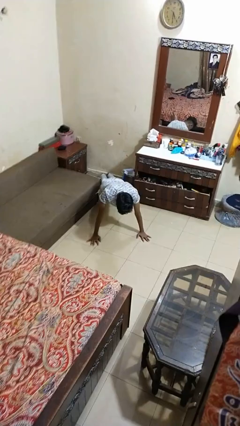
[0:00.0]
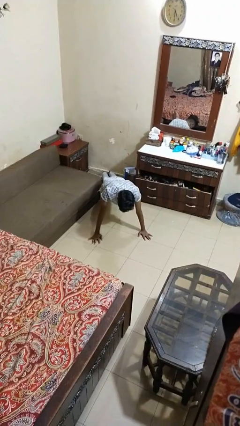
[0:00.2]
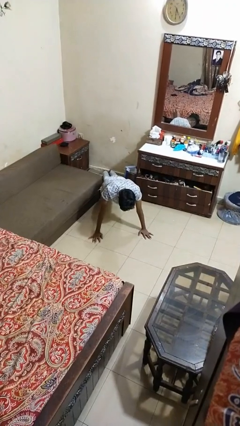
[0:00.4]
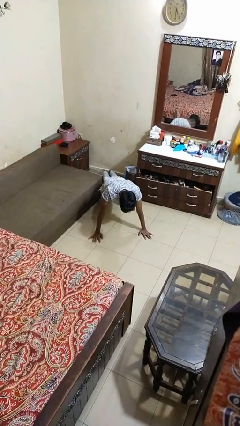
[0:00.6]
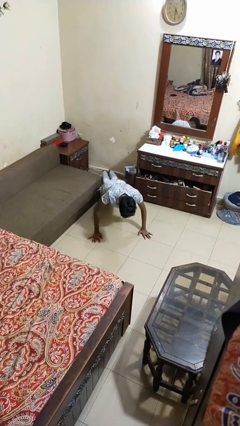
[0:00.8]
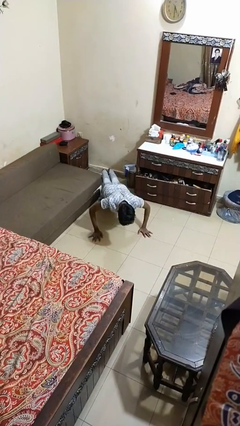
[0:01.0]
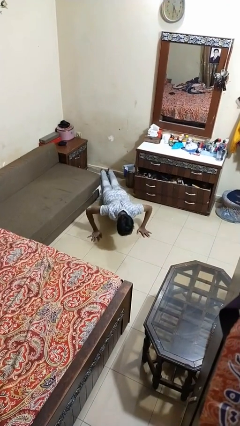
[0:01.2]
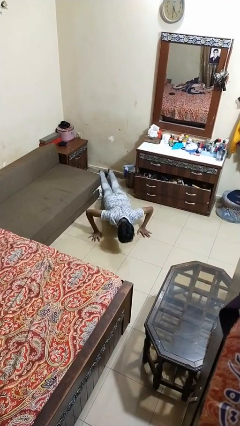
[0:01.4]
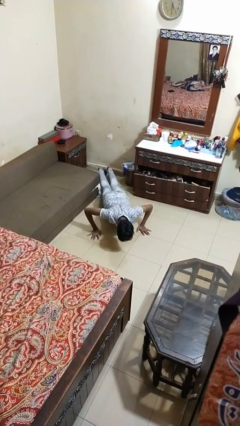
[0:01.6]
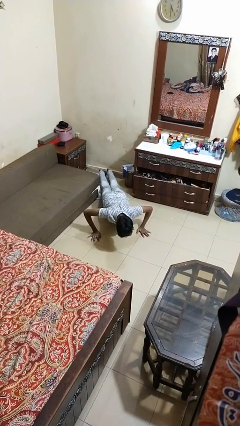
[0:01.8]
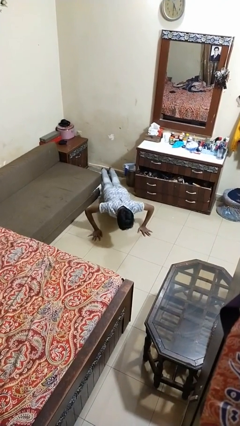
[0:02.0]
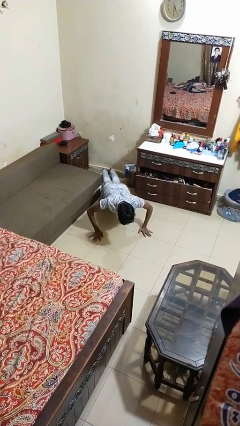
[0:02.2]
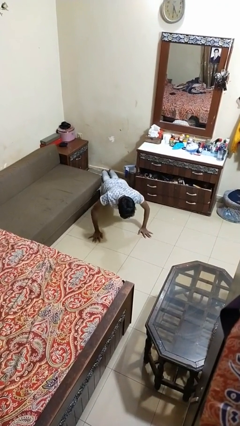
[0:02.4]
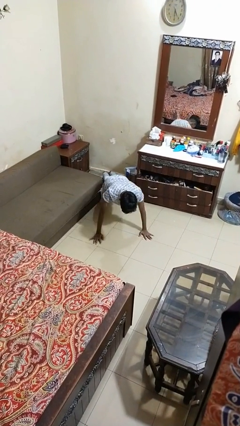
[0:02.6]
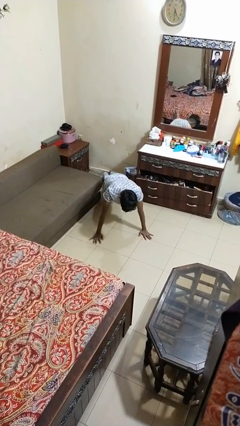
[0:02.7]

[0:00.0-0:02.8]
person exercises with pushup

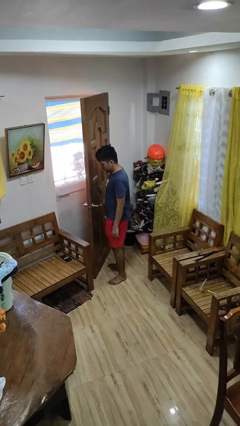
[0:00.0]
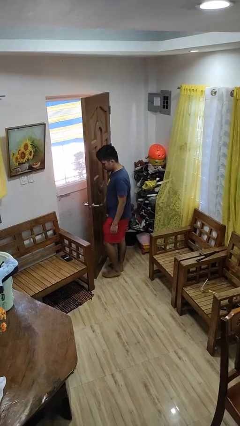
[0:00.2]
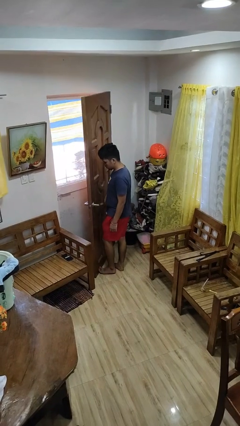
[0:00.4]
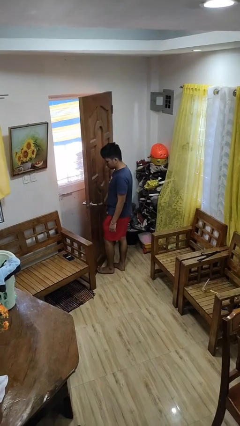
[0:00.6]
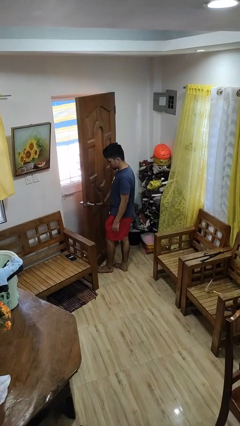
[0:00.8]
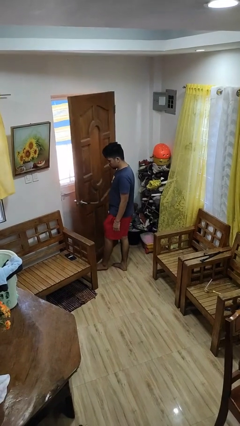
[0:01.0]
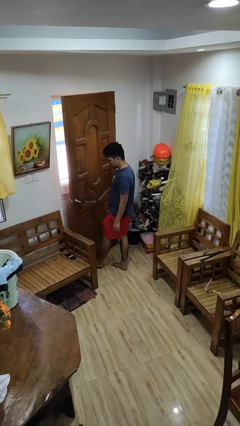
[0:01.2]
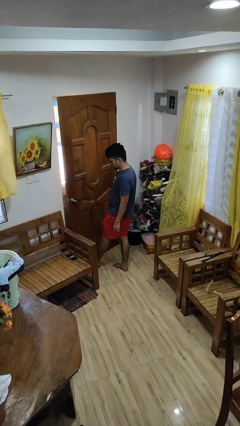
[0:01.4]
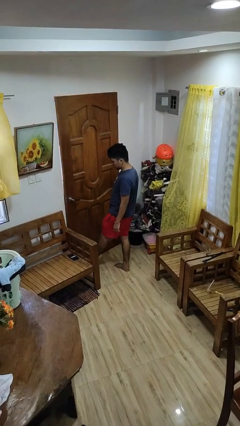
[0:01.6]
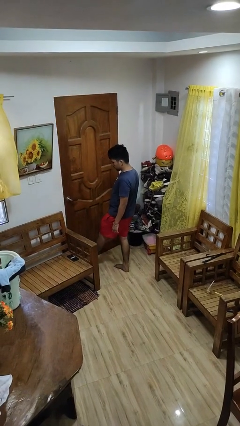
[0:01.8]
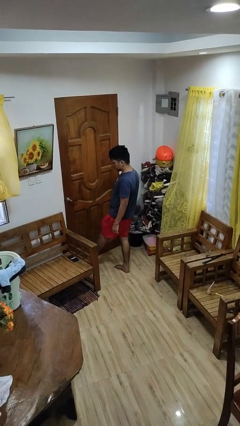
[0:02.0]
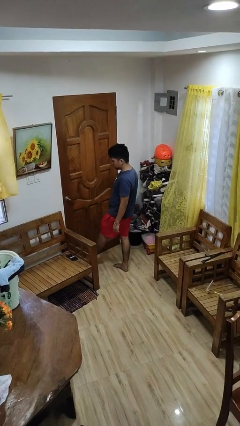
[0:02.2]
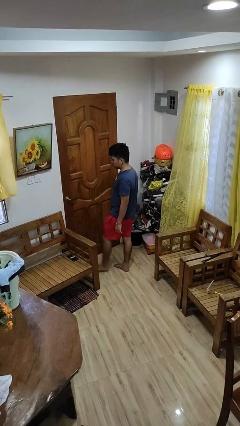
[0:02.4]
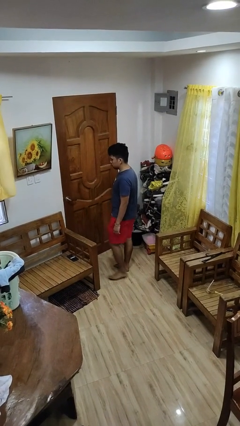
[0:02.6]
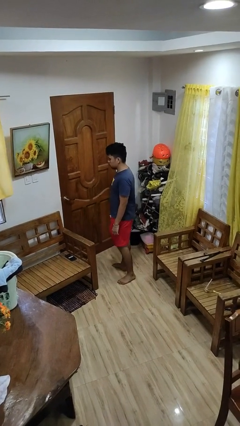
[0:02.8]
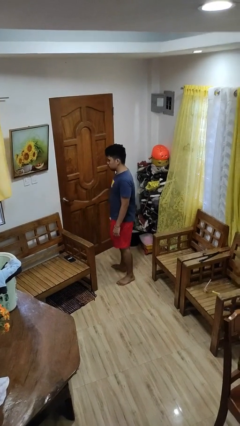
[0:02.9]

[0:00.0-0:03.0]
person closes door with foot

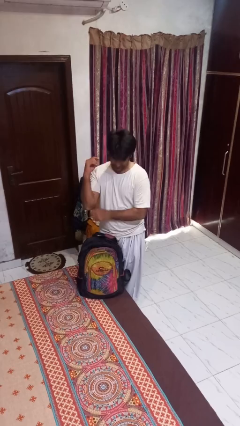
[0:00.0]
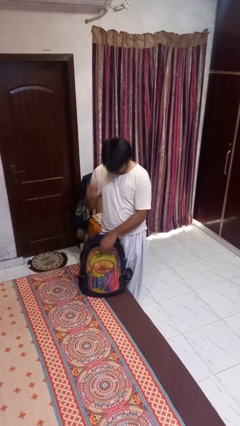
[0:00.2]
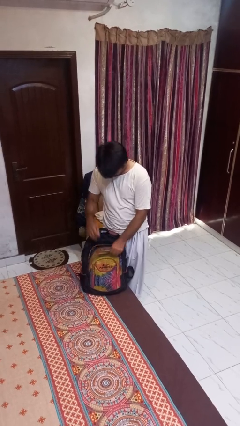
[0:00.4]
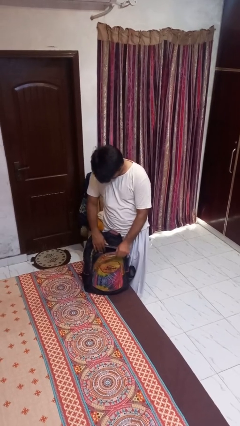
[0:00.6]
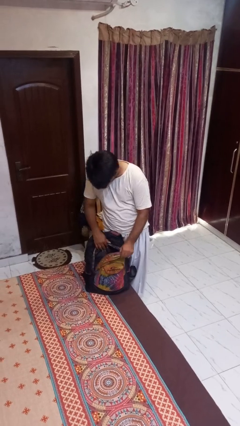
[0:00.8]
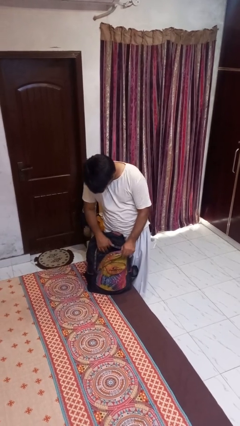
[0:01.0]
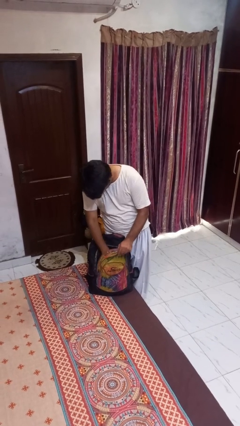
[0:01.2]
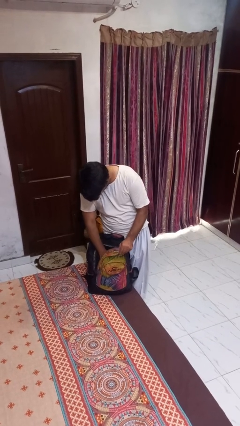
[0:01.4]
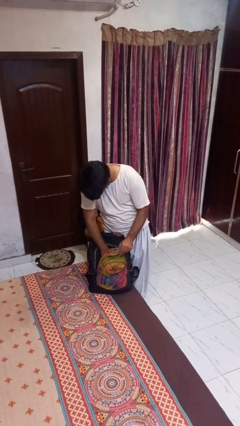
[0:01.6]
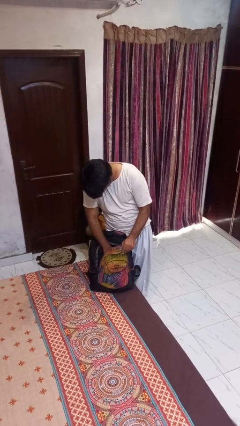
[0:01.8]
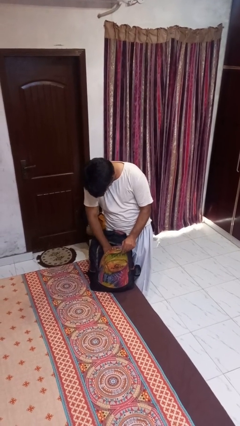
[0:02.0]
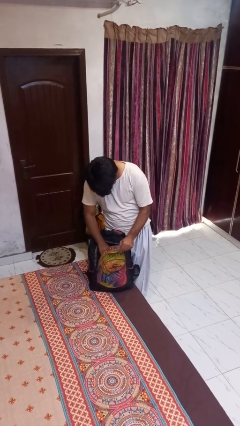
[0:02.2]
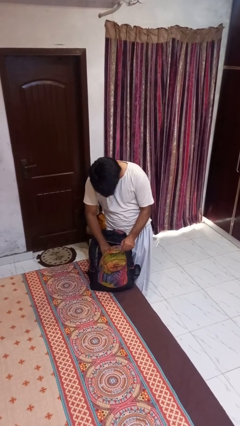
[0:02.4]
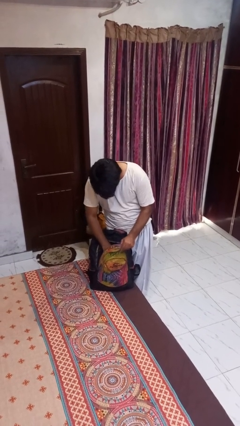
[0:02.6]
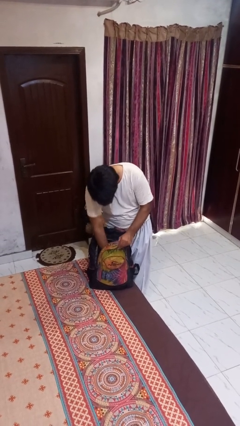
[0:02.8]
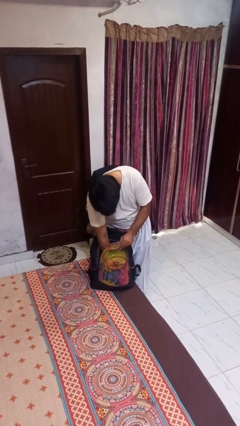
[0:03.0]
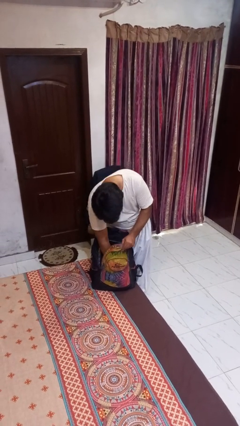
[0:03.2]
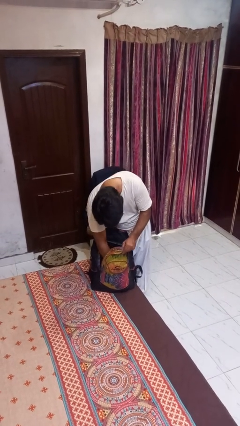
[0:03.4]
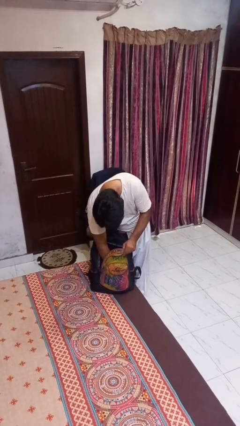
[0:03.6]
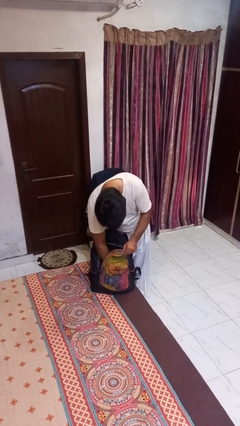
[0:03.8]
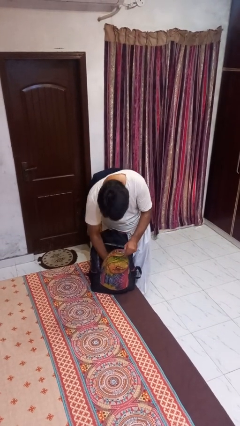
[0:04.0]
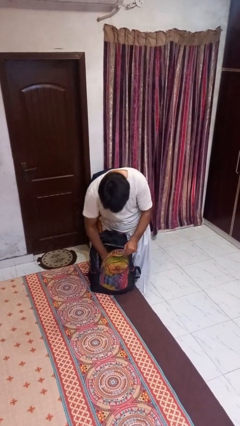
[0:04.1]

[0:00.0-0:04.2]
person searches in backpack

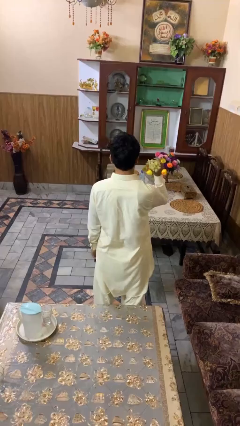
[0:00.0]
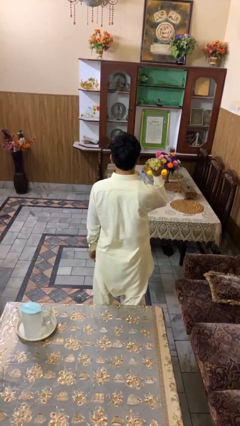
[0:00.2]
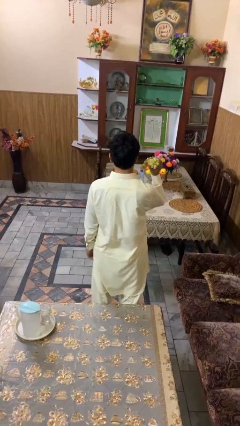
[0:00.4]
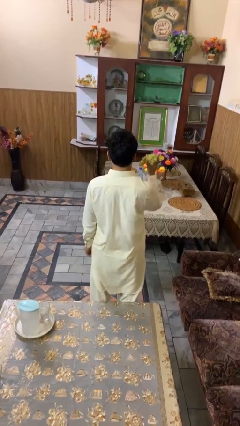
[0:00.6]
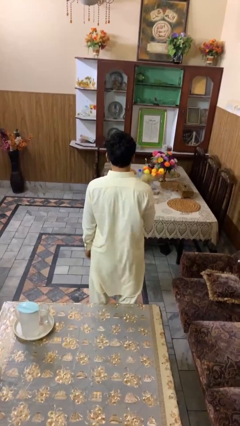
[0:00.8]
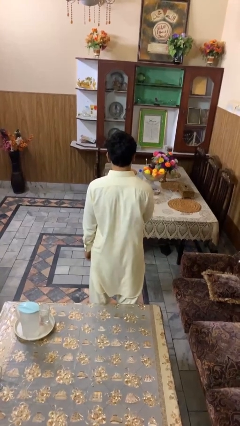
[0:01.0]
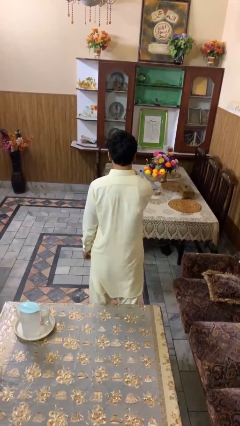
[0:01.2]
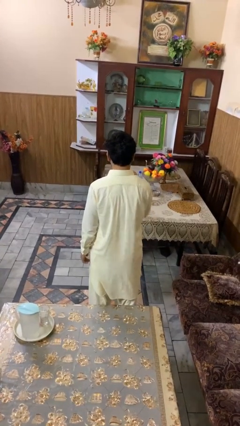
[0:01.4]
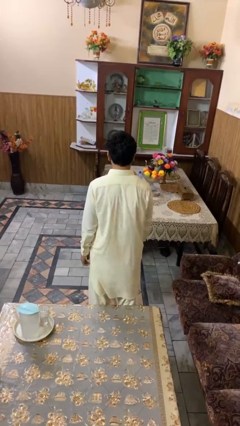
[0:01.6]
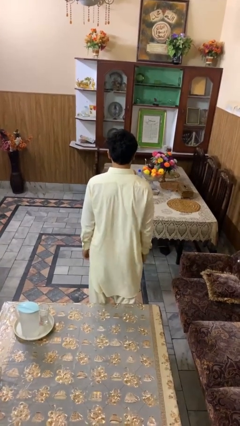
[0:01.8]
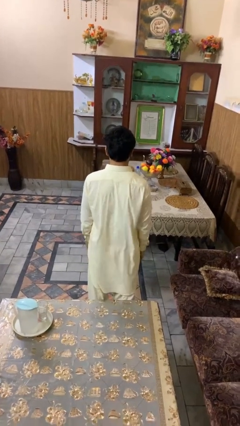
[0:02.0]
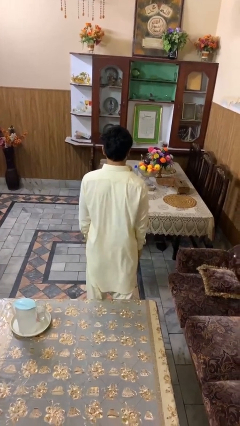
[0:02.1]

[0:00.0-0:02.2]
person throws object on table

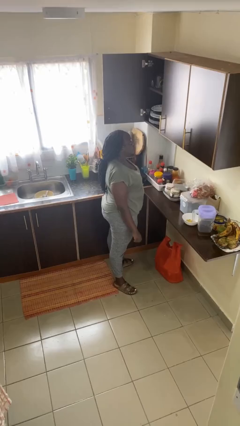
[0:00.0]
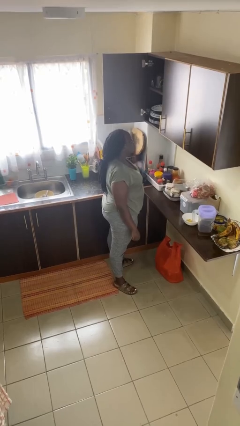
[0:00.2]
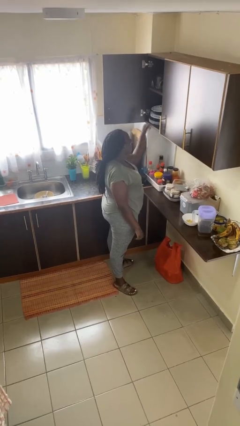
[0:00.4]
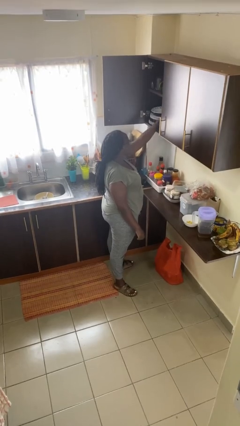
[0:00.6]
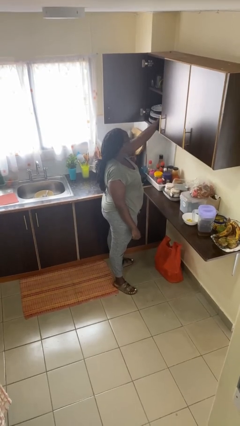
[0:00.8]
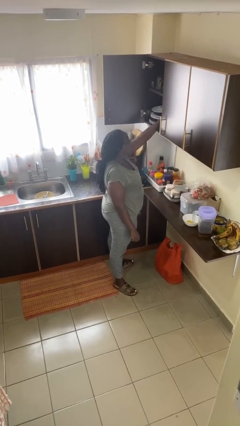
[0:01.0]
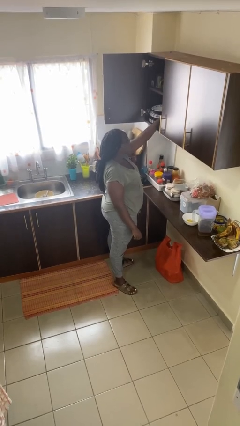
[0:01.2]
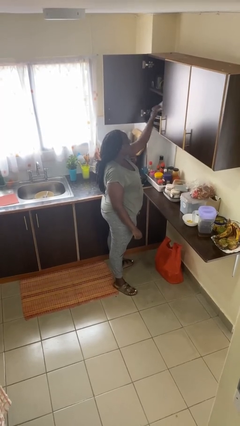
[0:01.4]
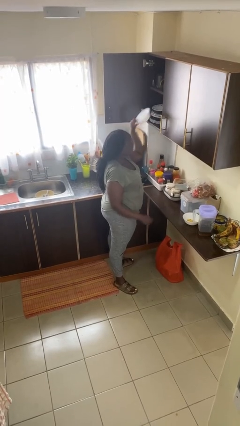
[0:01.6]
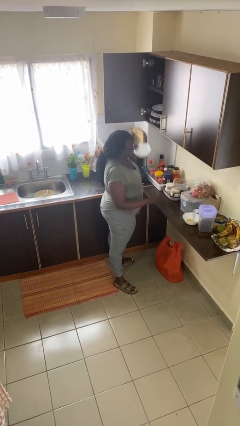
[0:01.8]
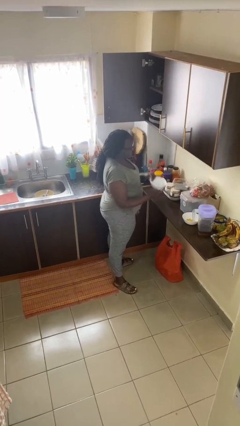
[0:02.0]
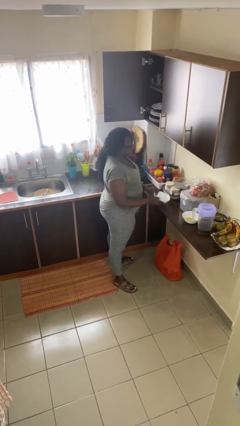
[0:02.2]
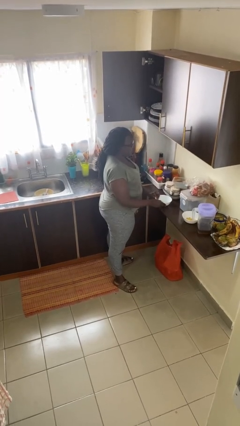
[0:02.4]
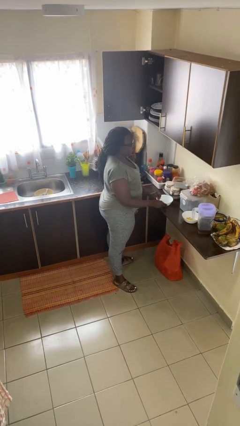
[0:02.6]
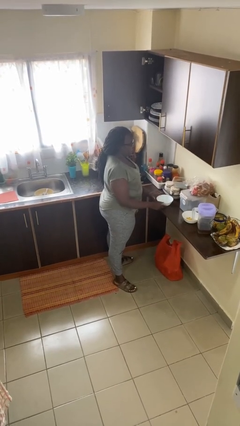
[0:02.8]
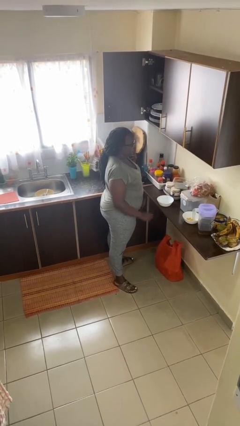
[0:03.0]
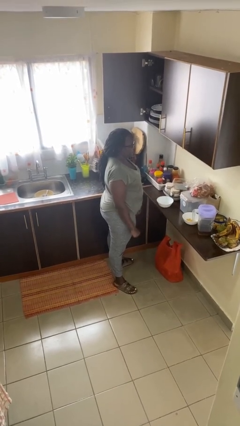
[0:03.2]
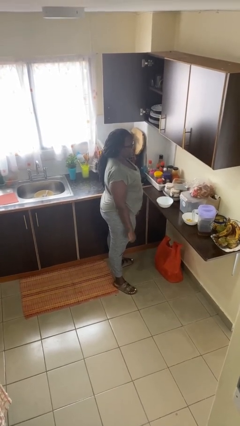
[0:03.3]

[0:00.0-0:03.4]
person takes object from cabinet

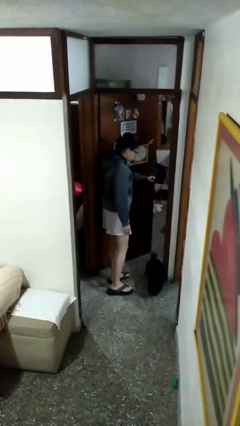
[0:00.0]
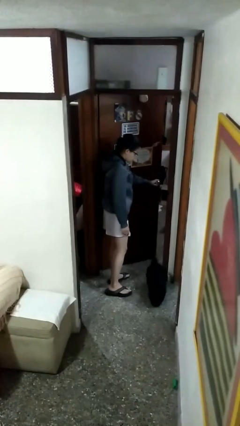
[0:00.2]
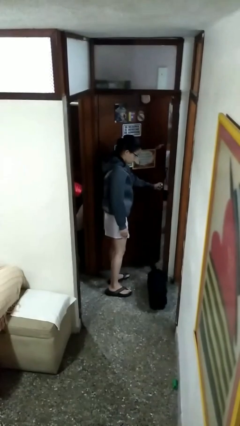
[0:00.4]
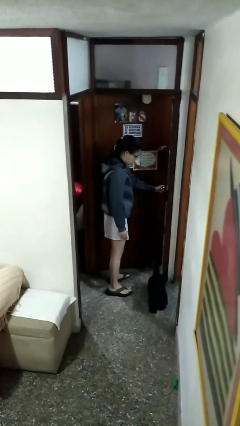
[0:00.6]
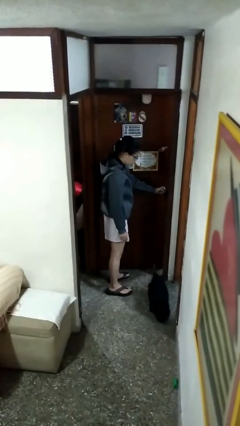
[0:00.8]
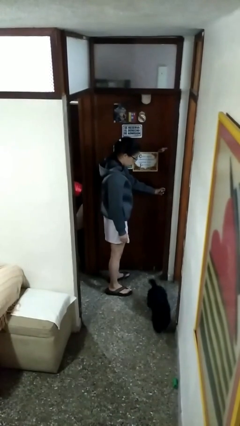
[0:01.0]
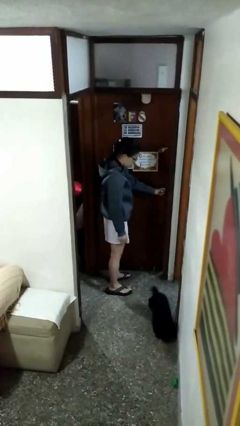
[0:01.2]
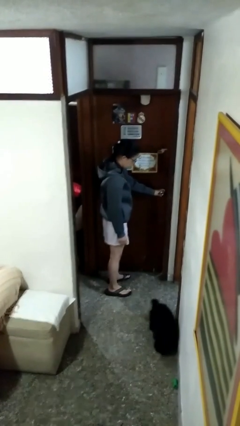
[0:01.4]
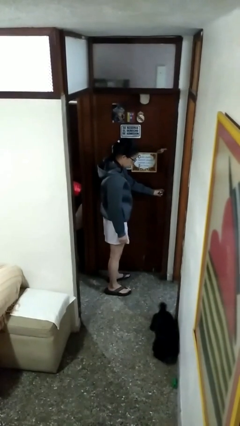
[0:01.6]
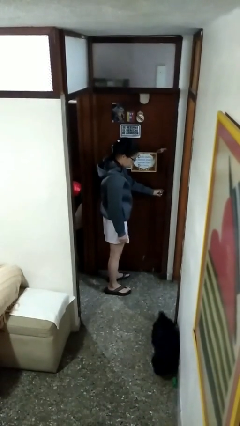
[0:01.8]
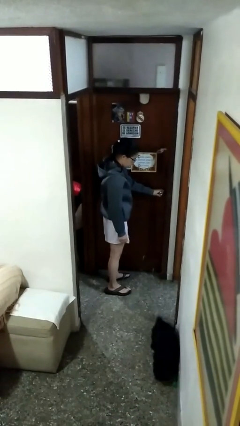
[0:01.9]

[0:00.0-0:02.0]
person closes facility door
